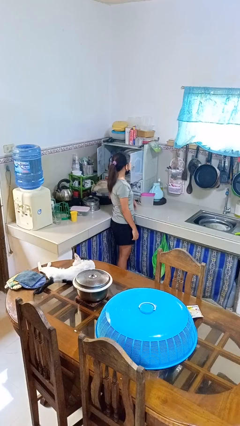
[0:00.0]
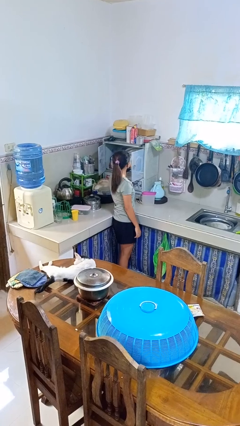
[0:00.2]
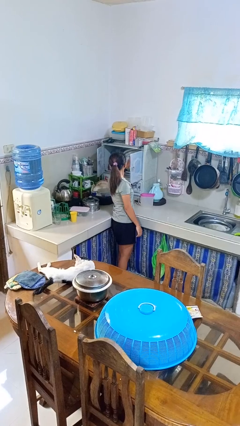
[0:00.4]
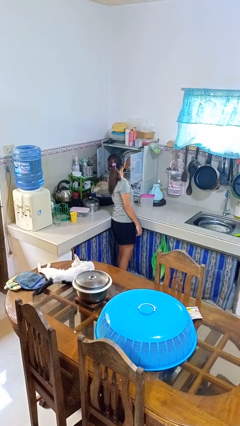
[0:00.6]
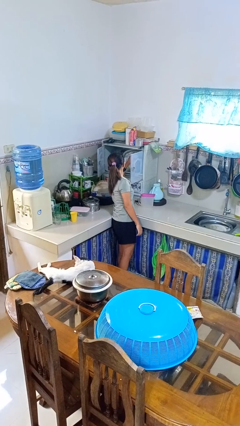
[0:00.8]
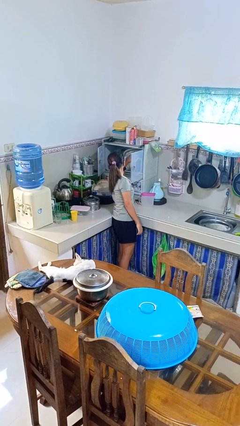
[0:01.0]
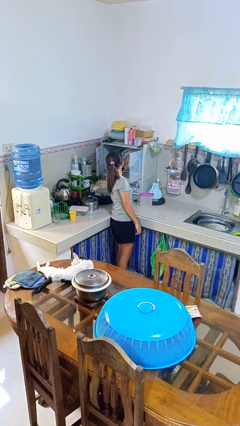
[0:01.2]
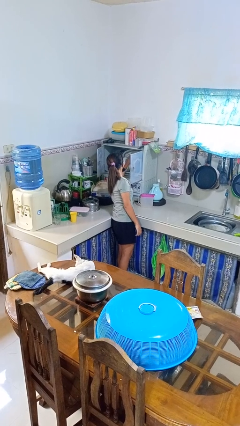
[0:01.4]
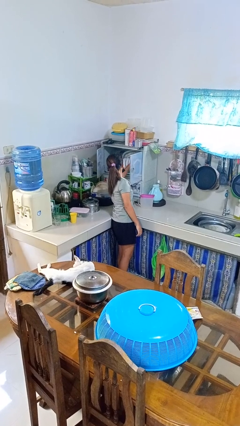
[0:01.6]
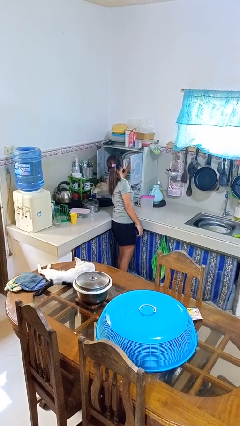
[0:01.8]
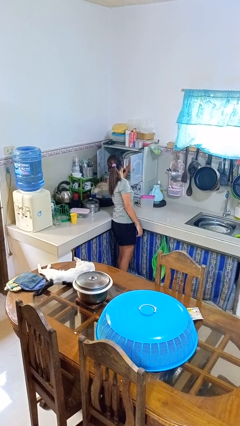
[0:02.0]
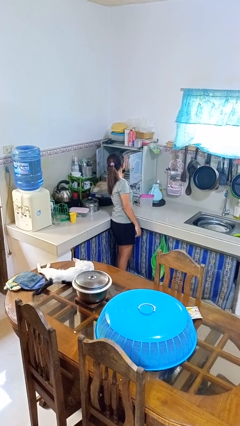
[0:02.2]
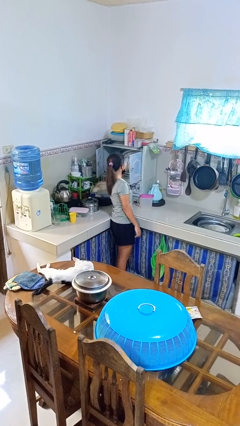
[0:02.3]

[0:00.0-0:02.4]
person searches in kitchen drawer

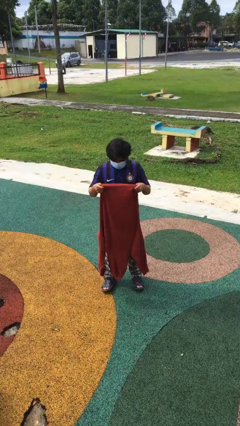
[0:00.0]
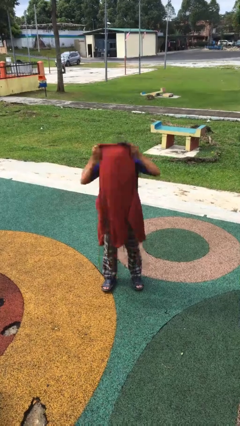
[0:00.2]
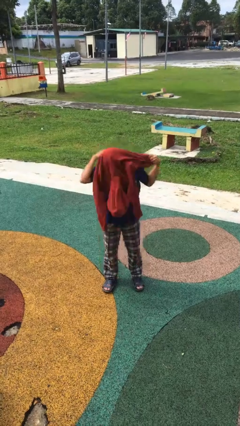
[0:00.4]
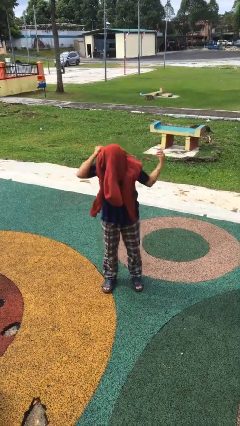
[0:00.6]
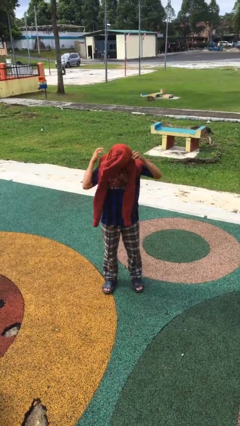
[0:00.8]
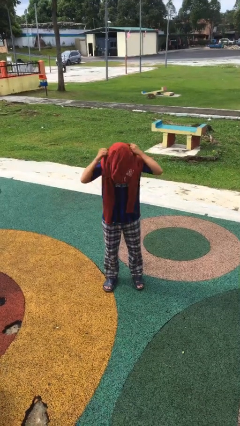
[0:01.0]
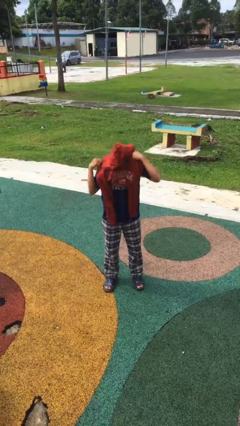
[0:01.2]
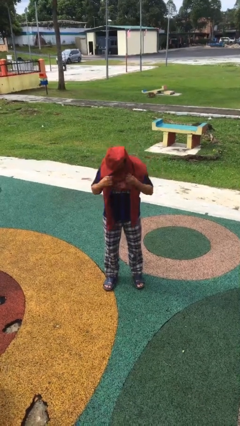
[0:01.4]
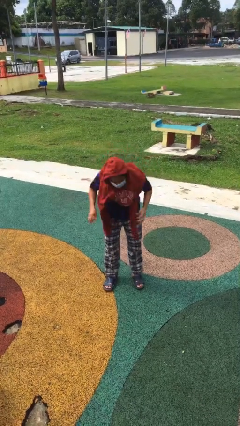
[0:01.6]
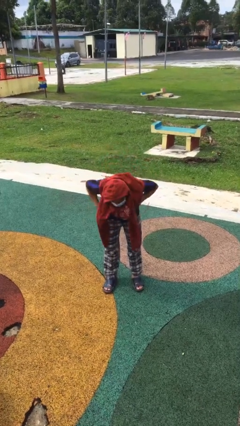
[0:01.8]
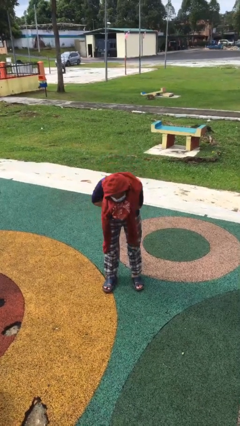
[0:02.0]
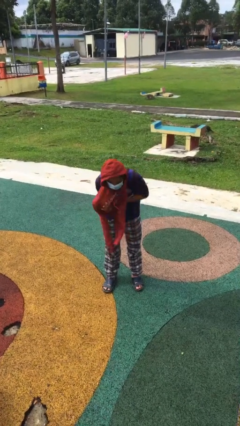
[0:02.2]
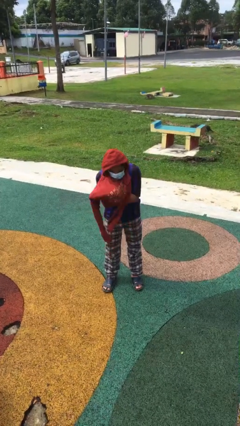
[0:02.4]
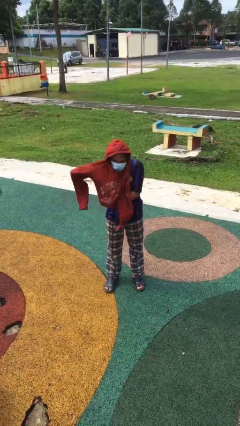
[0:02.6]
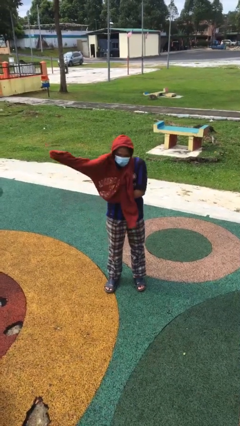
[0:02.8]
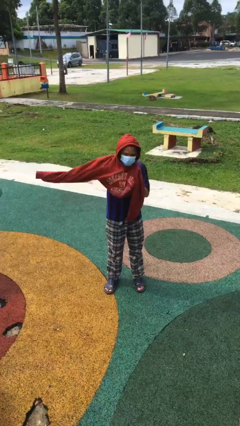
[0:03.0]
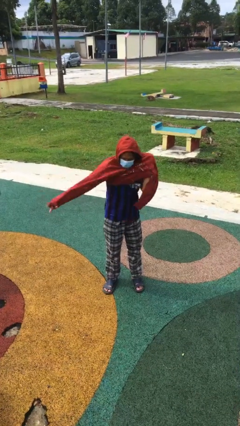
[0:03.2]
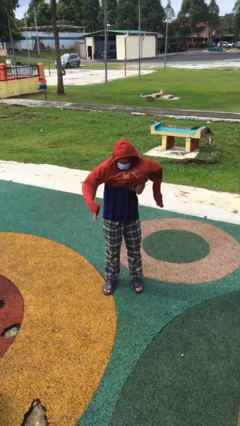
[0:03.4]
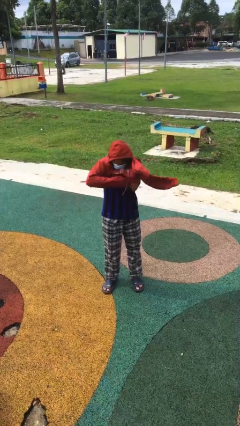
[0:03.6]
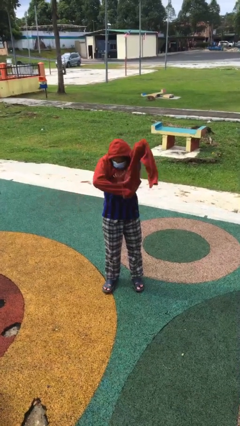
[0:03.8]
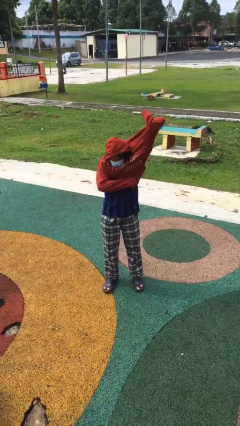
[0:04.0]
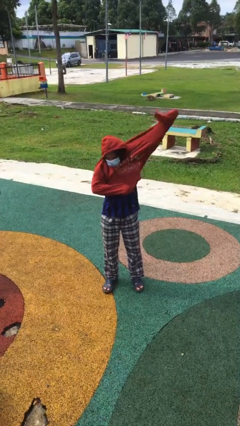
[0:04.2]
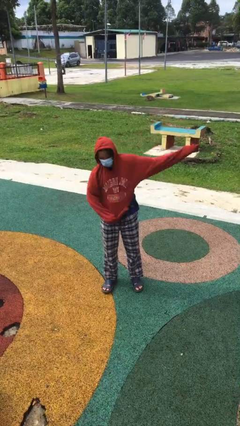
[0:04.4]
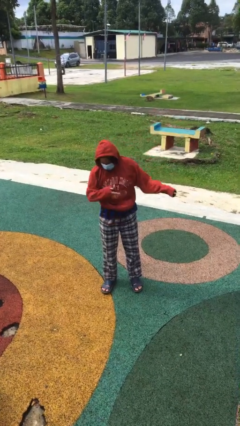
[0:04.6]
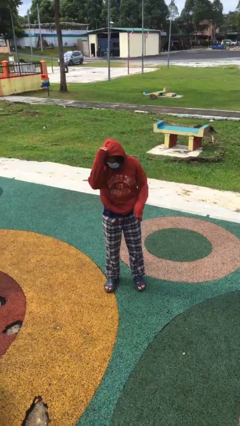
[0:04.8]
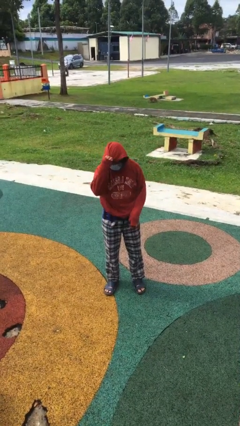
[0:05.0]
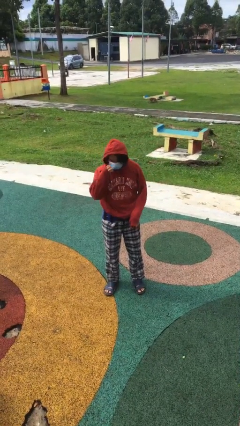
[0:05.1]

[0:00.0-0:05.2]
person puts on hoodie

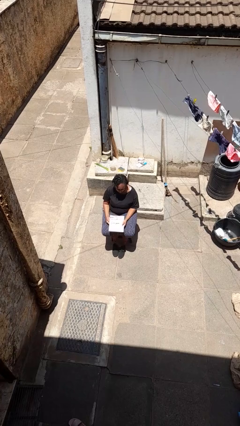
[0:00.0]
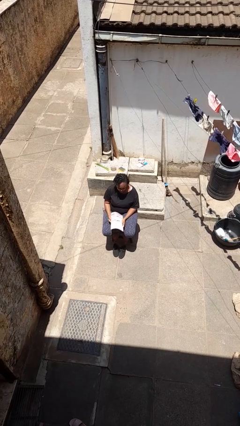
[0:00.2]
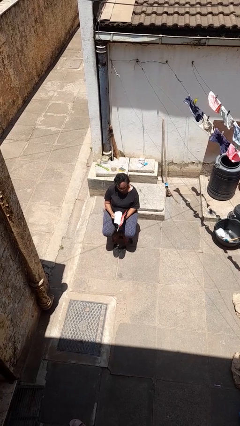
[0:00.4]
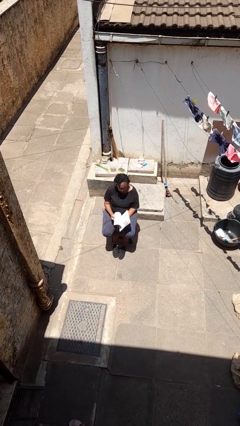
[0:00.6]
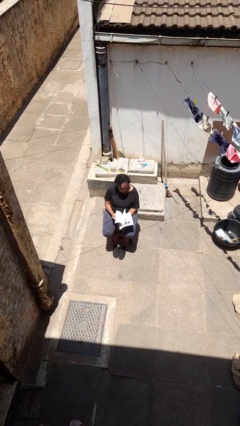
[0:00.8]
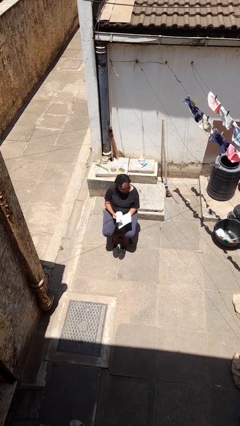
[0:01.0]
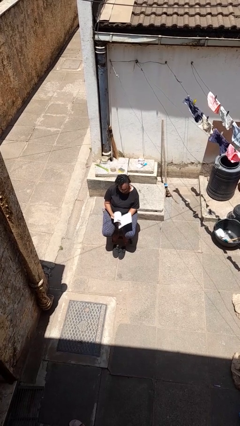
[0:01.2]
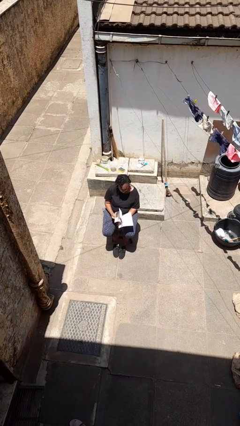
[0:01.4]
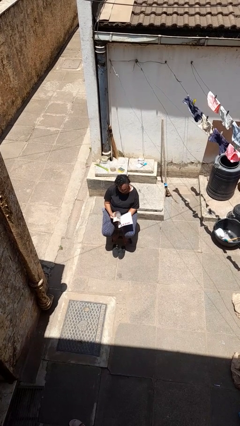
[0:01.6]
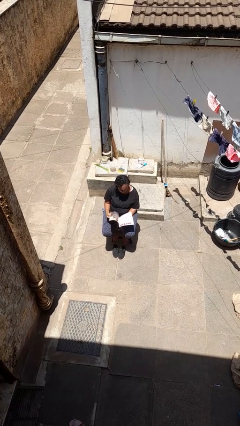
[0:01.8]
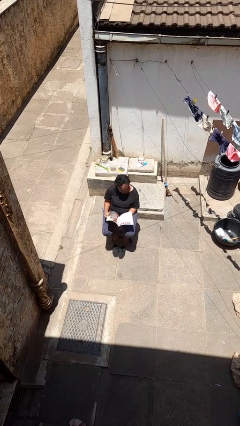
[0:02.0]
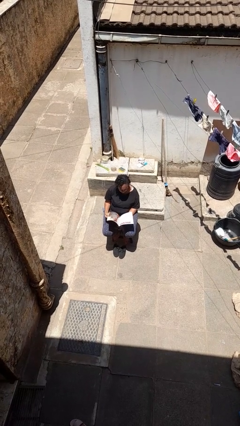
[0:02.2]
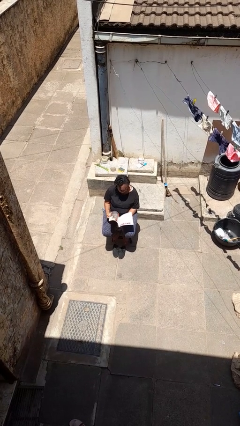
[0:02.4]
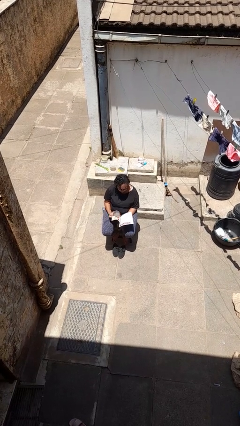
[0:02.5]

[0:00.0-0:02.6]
person reads magazine

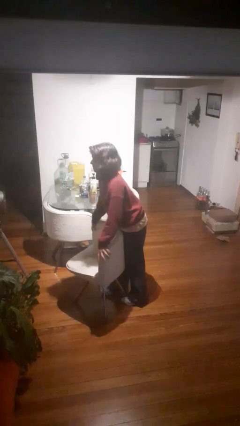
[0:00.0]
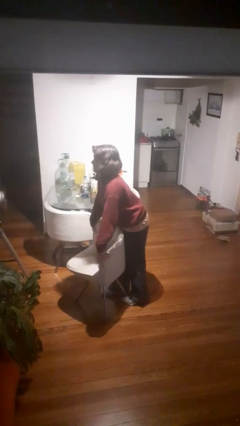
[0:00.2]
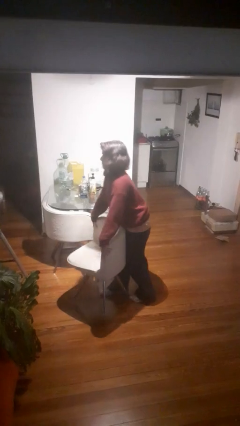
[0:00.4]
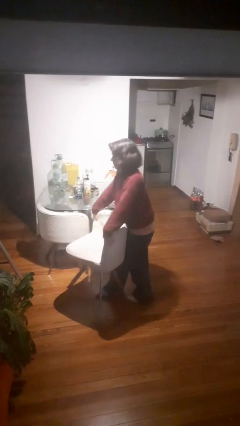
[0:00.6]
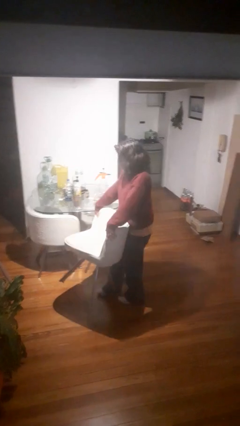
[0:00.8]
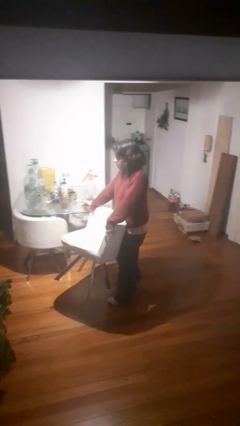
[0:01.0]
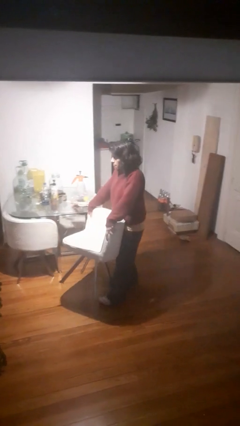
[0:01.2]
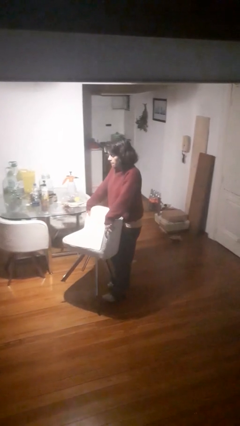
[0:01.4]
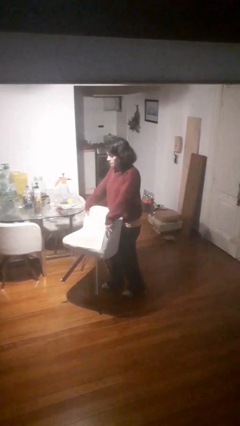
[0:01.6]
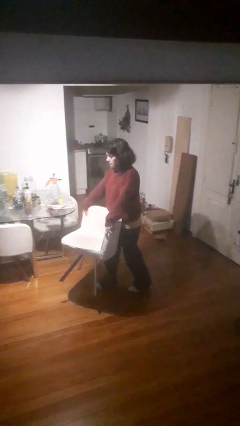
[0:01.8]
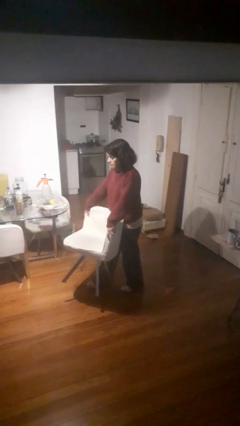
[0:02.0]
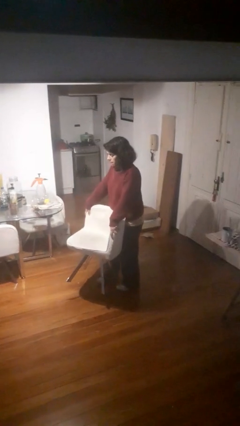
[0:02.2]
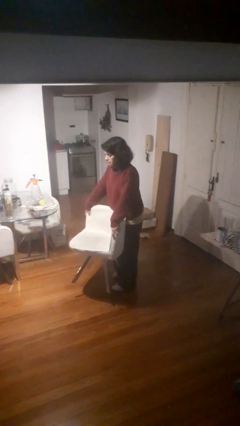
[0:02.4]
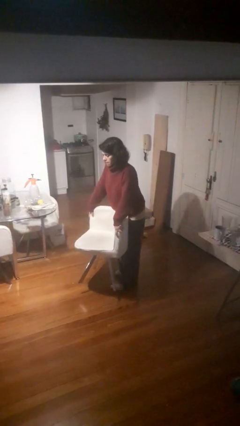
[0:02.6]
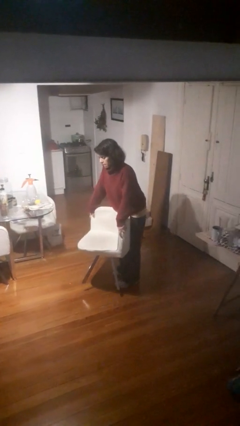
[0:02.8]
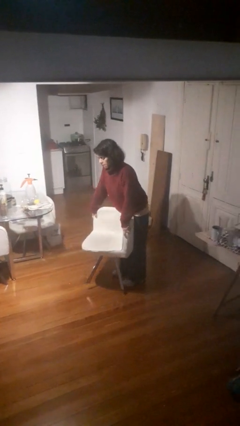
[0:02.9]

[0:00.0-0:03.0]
person carries furniture

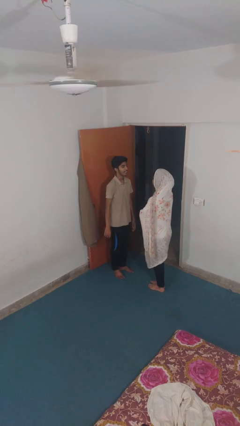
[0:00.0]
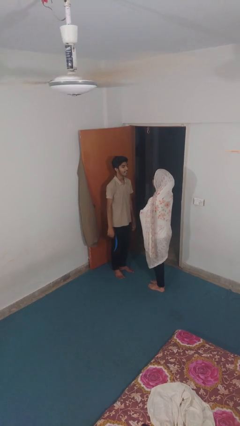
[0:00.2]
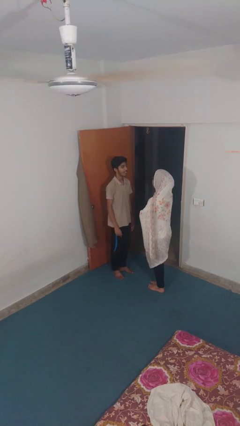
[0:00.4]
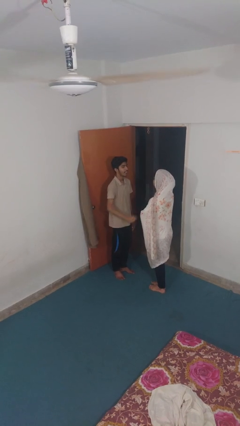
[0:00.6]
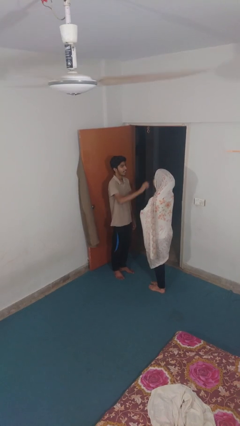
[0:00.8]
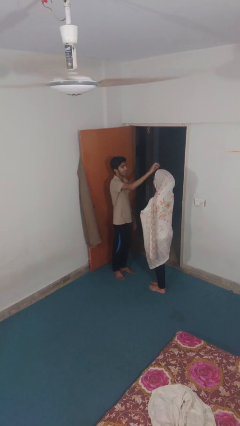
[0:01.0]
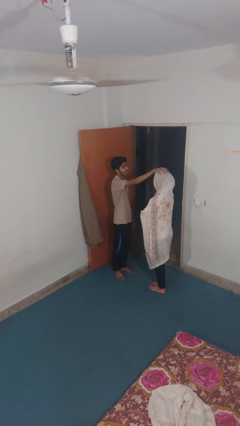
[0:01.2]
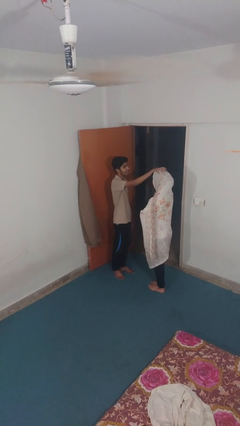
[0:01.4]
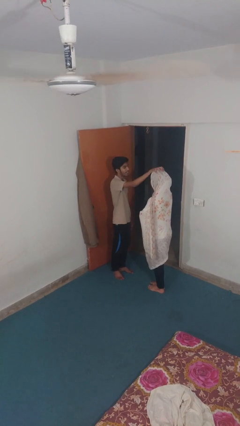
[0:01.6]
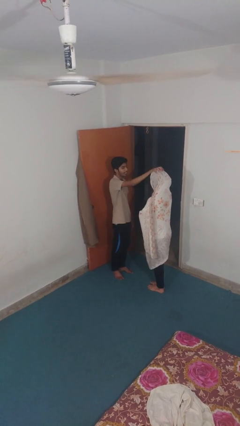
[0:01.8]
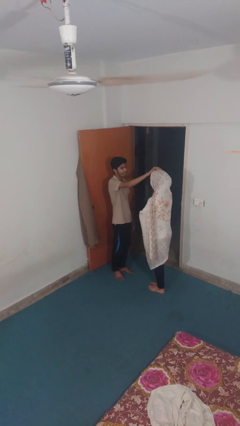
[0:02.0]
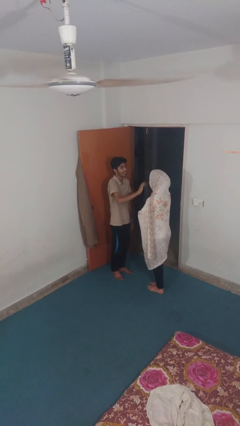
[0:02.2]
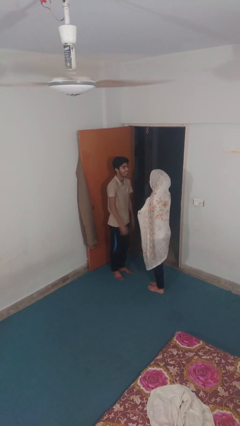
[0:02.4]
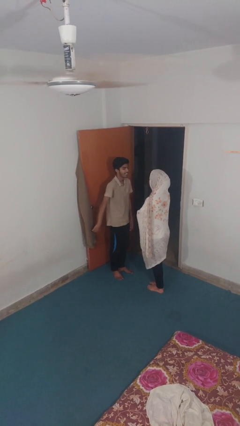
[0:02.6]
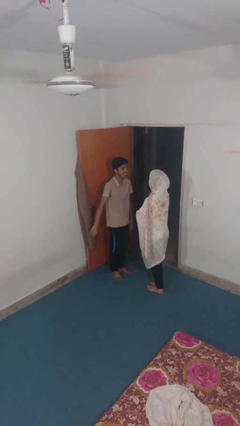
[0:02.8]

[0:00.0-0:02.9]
person grabs person by hair

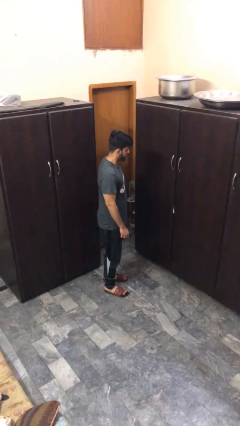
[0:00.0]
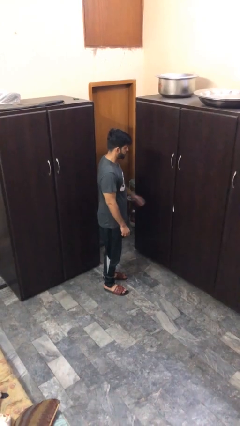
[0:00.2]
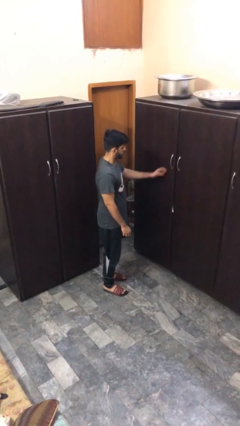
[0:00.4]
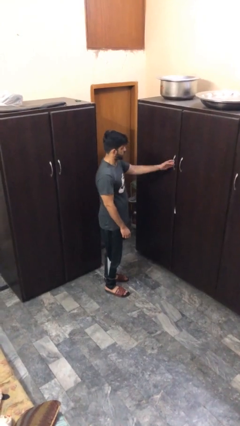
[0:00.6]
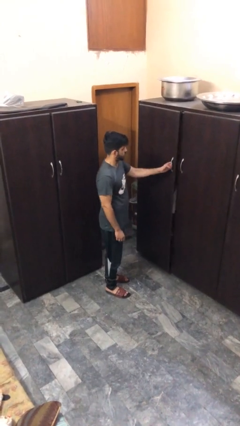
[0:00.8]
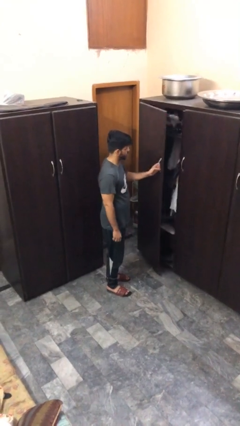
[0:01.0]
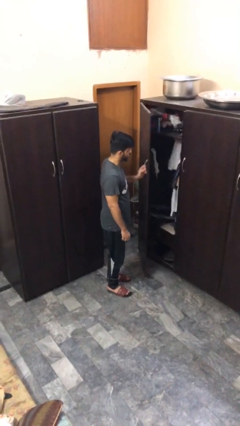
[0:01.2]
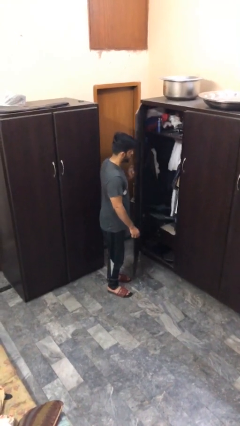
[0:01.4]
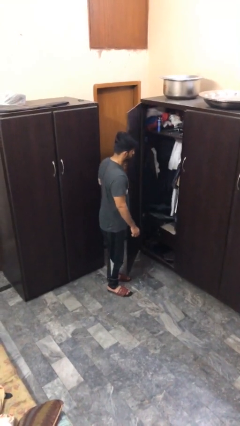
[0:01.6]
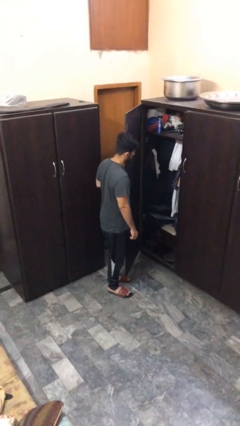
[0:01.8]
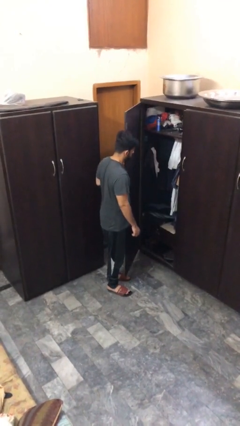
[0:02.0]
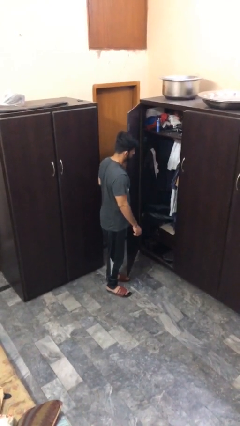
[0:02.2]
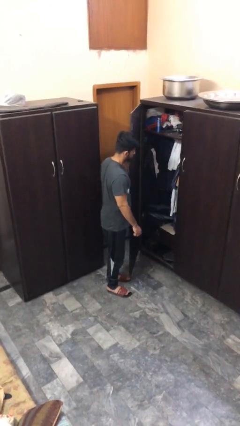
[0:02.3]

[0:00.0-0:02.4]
person opens dresser drawer
